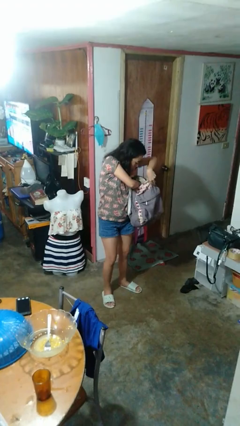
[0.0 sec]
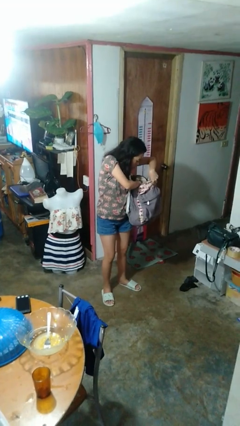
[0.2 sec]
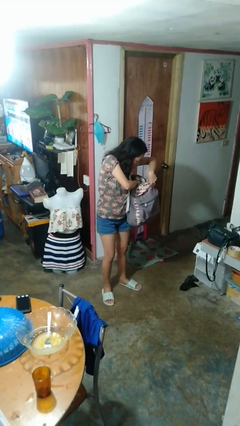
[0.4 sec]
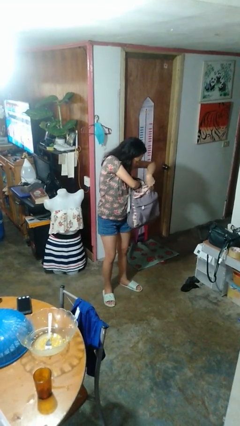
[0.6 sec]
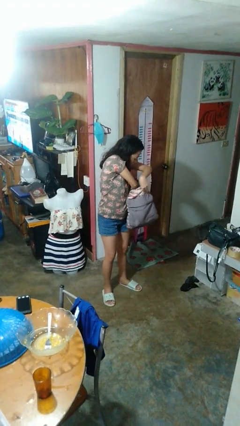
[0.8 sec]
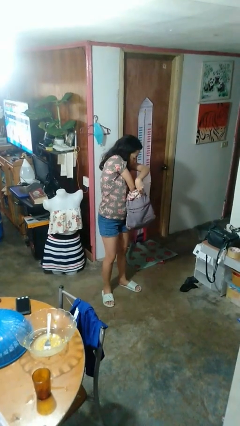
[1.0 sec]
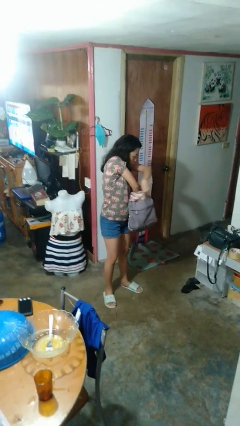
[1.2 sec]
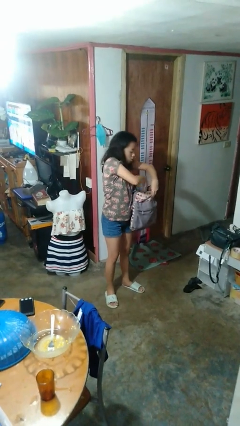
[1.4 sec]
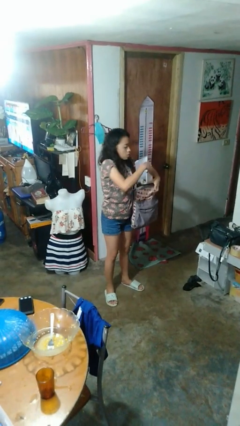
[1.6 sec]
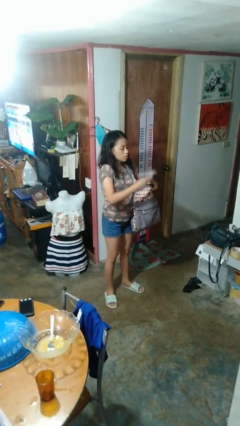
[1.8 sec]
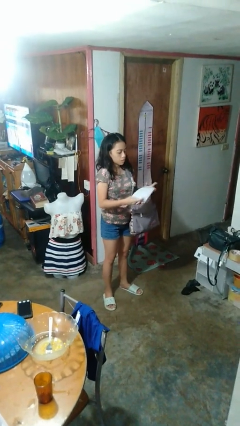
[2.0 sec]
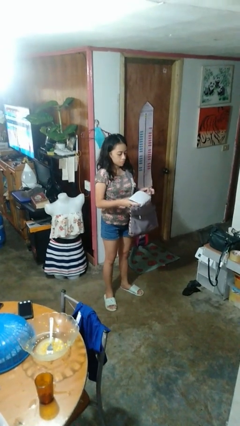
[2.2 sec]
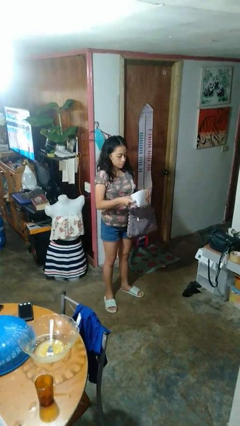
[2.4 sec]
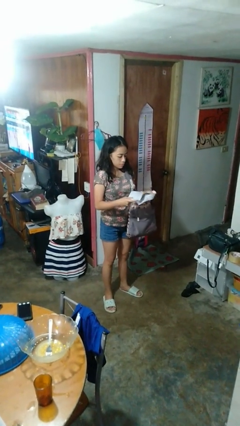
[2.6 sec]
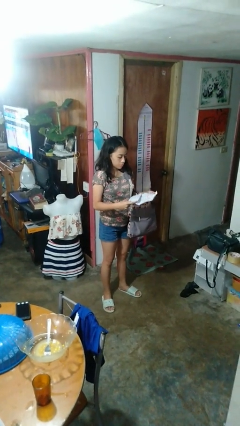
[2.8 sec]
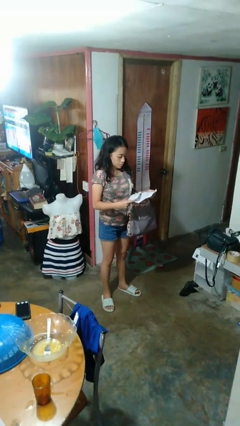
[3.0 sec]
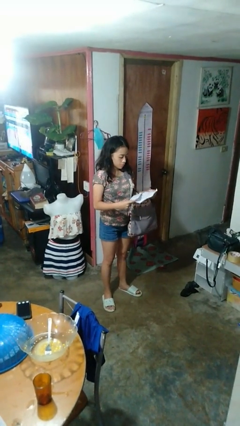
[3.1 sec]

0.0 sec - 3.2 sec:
person takes object from backpack

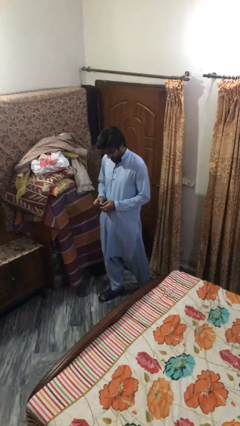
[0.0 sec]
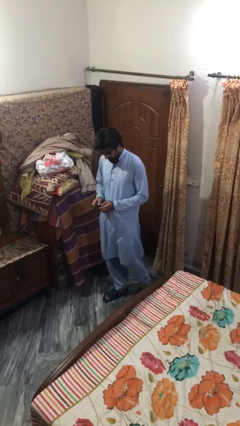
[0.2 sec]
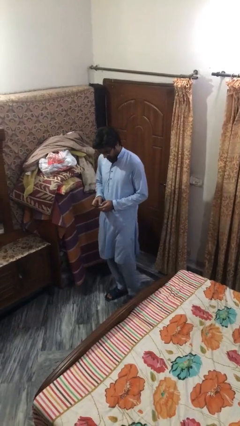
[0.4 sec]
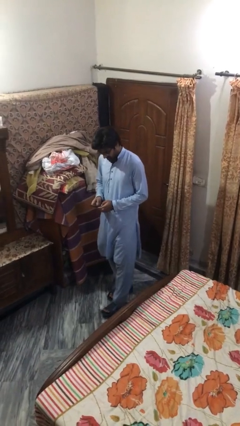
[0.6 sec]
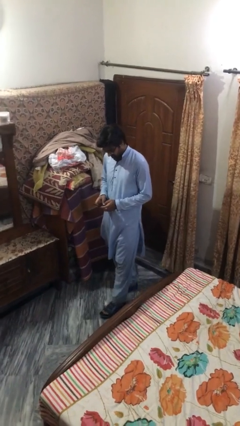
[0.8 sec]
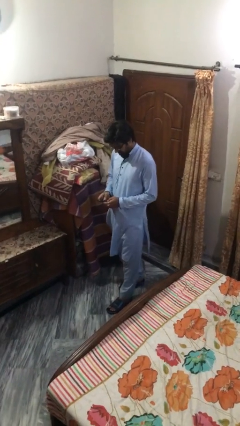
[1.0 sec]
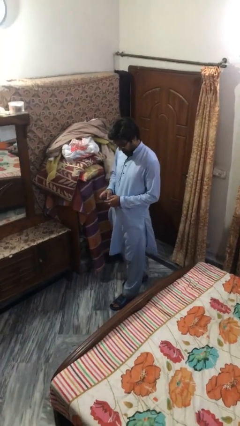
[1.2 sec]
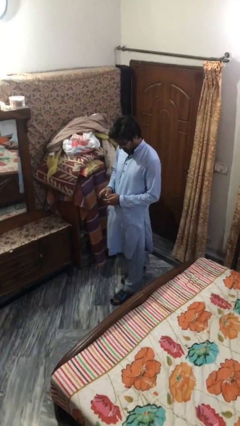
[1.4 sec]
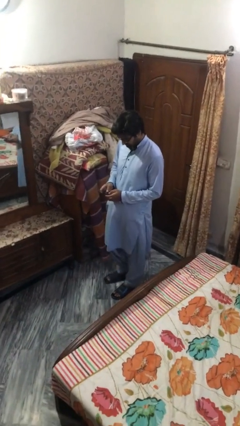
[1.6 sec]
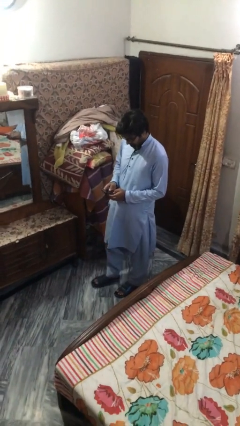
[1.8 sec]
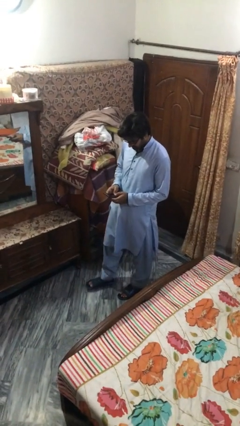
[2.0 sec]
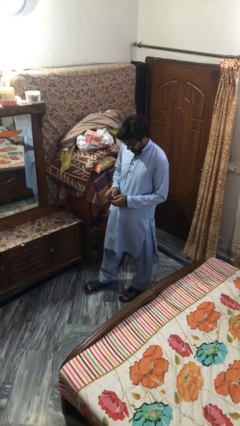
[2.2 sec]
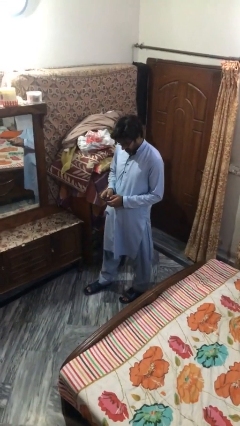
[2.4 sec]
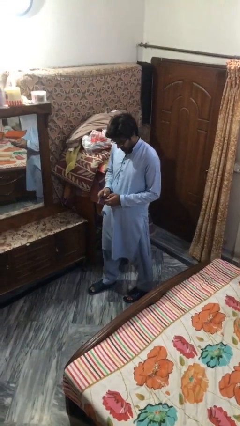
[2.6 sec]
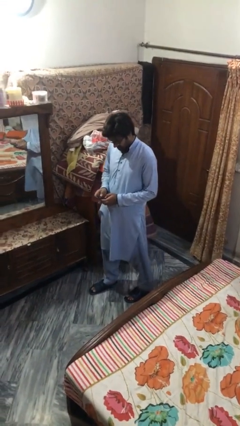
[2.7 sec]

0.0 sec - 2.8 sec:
person texts on phone

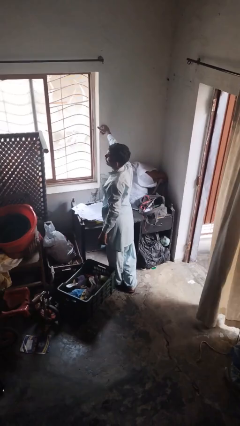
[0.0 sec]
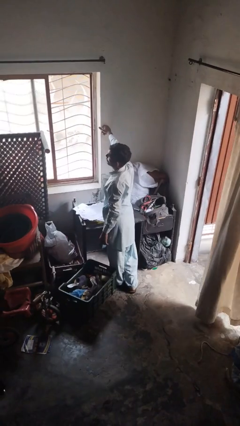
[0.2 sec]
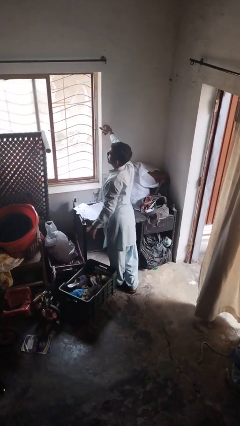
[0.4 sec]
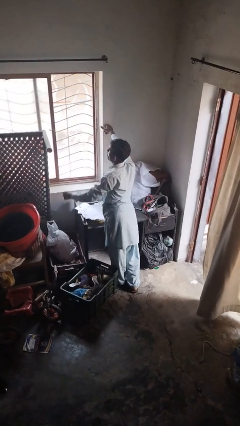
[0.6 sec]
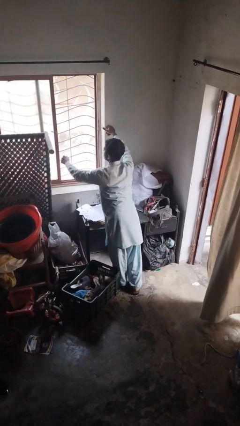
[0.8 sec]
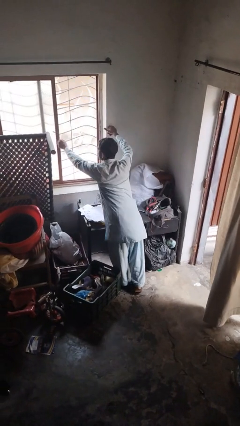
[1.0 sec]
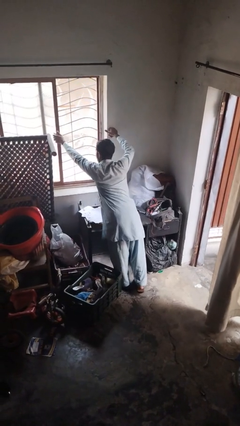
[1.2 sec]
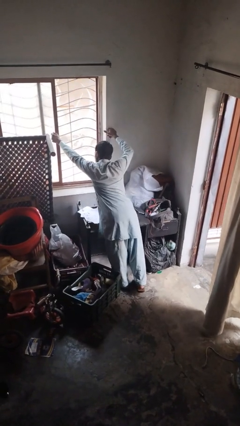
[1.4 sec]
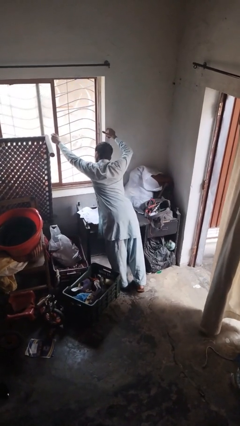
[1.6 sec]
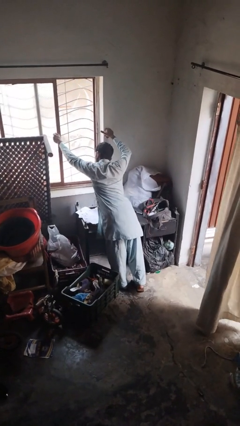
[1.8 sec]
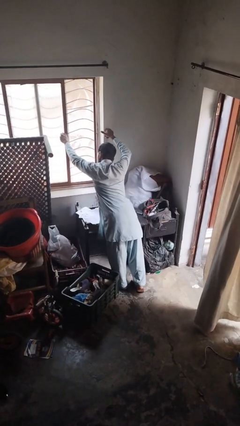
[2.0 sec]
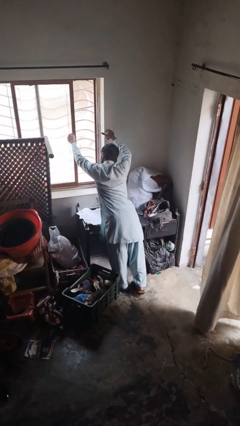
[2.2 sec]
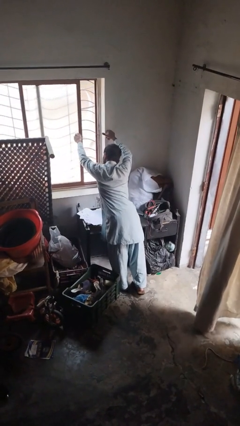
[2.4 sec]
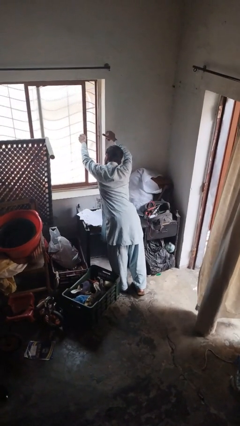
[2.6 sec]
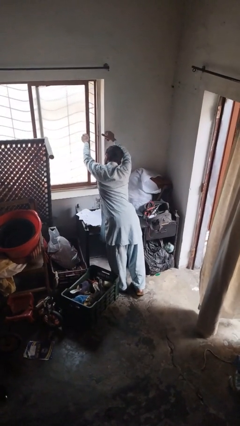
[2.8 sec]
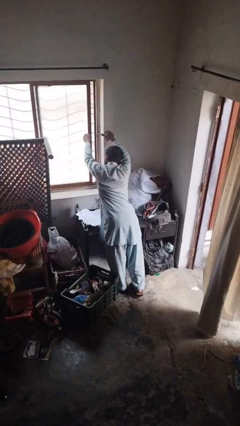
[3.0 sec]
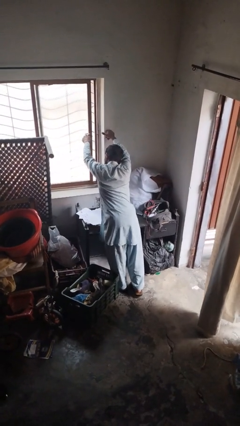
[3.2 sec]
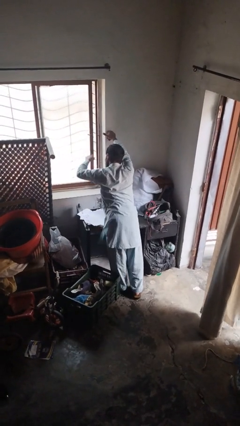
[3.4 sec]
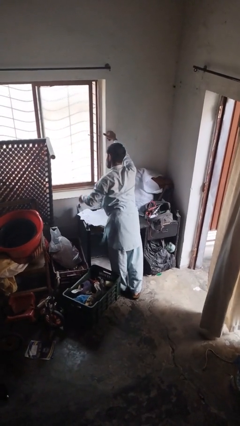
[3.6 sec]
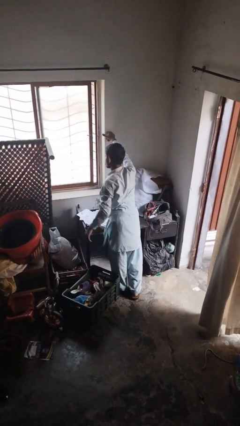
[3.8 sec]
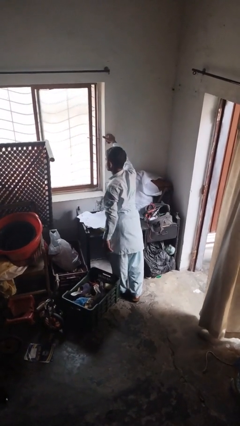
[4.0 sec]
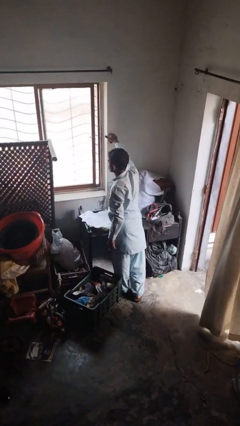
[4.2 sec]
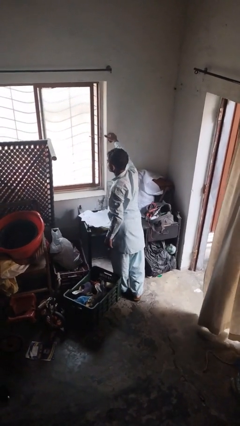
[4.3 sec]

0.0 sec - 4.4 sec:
person closes home window

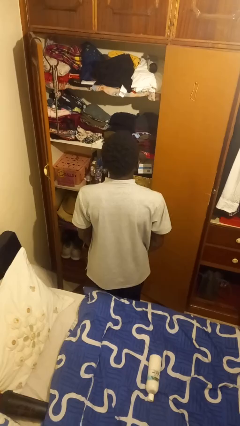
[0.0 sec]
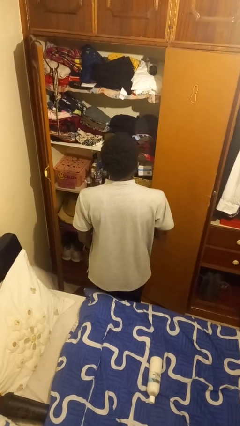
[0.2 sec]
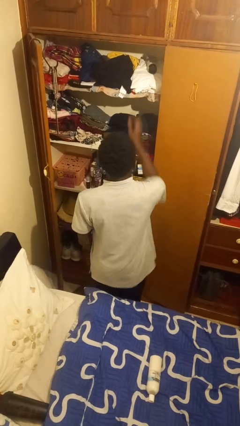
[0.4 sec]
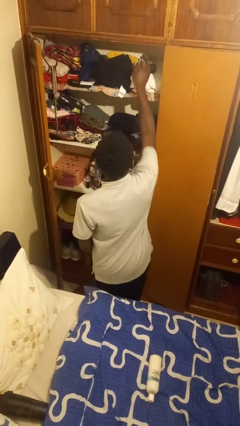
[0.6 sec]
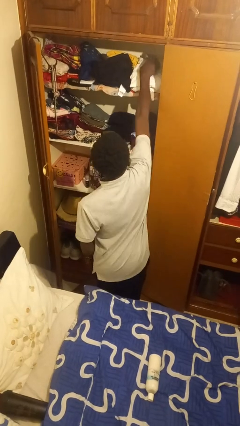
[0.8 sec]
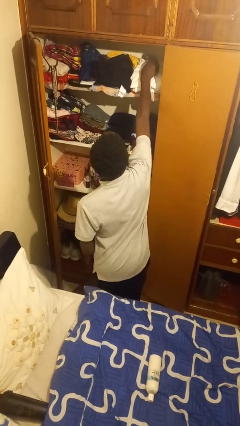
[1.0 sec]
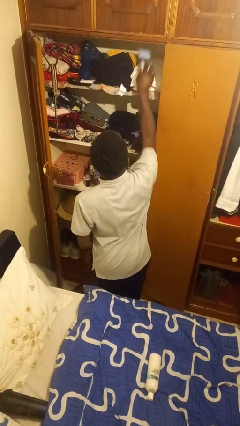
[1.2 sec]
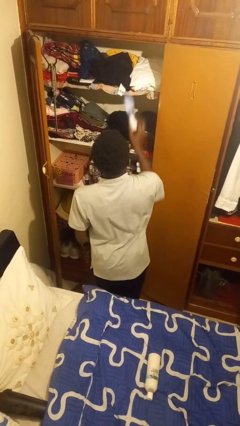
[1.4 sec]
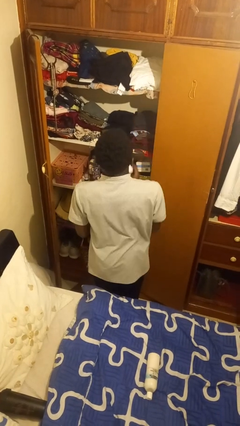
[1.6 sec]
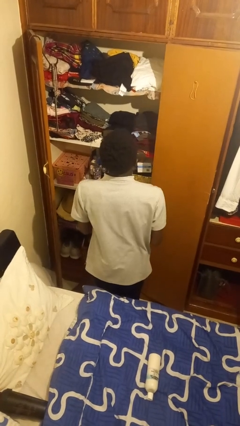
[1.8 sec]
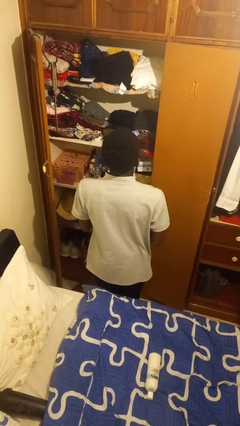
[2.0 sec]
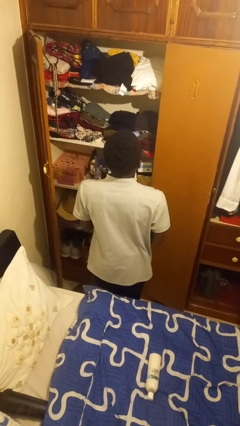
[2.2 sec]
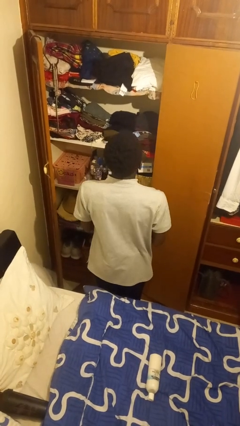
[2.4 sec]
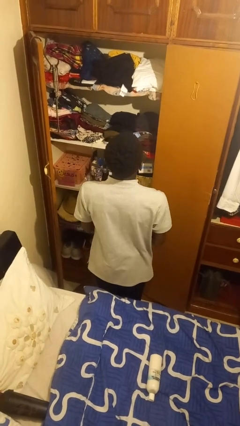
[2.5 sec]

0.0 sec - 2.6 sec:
person picks up object from shelf

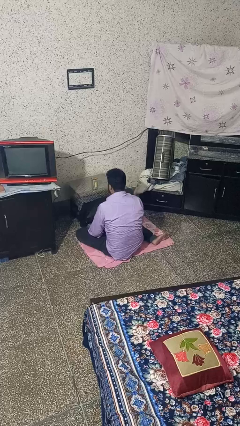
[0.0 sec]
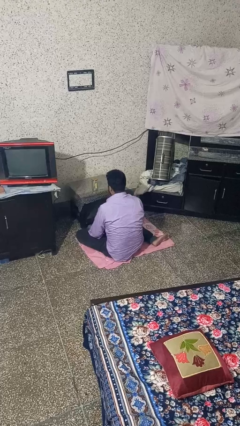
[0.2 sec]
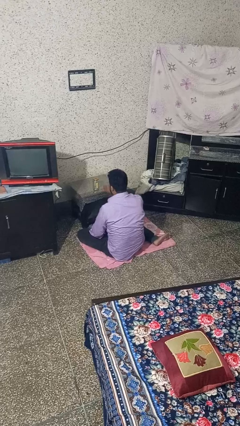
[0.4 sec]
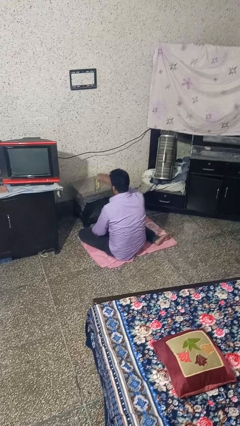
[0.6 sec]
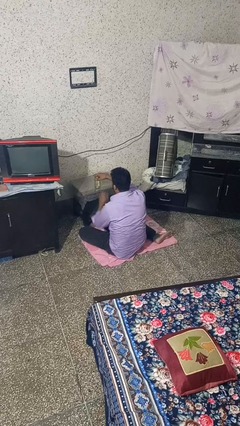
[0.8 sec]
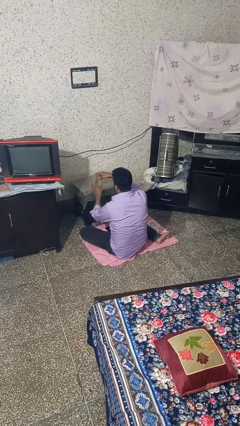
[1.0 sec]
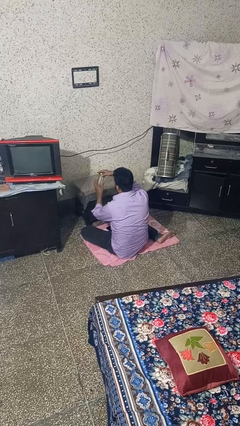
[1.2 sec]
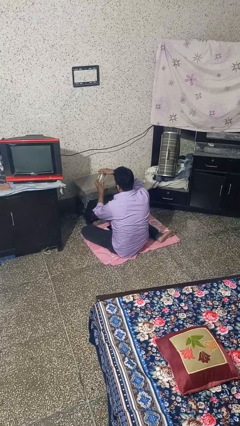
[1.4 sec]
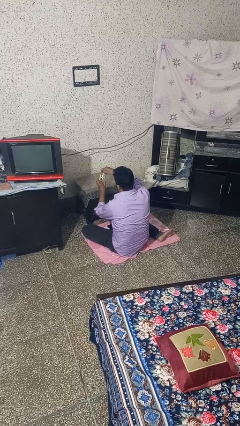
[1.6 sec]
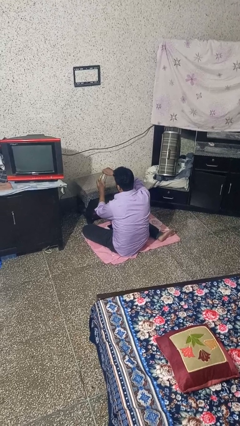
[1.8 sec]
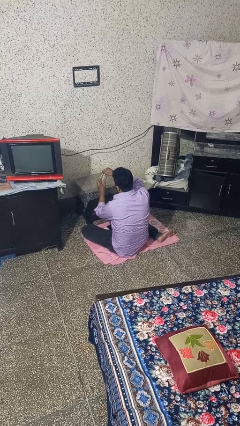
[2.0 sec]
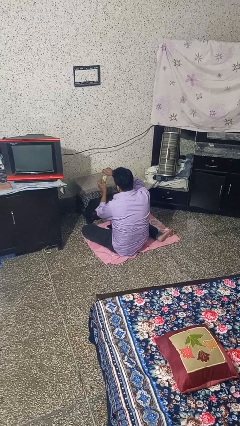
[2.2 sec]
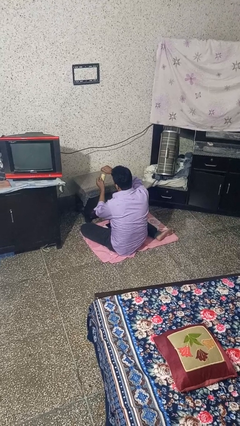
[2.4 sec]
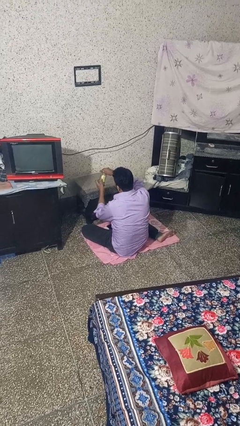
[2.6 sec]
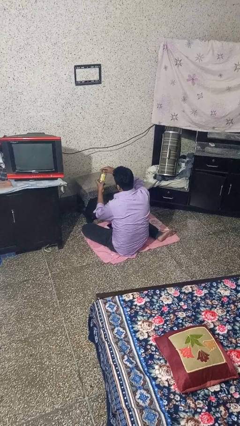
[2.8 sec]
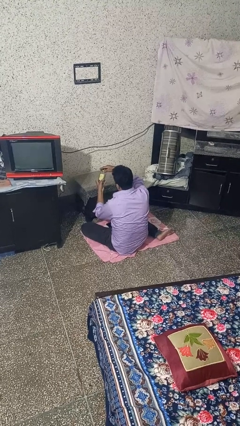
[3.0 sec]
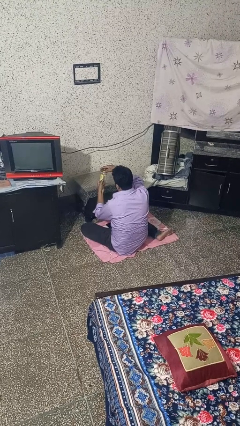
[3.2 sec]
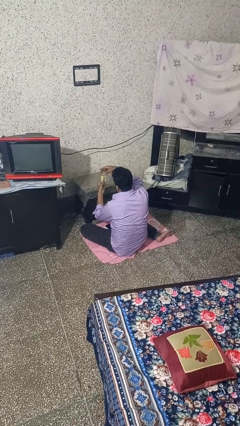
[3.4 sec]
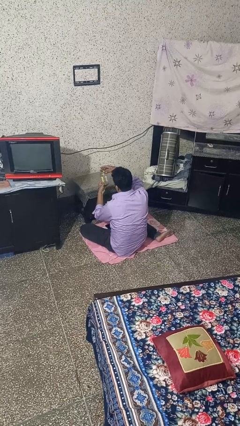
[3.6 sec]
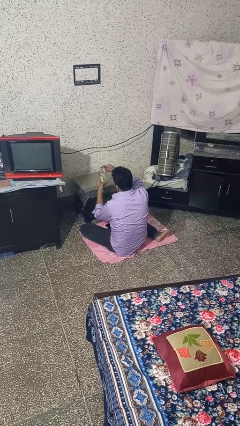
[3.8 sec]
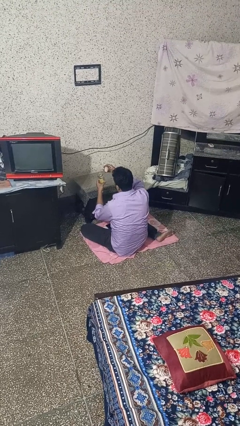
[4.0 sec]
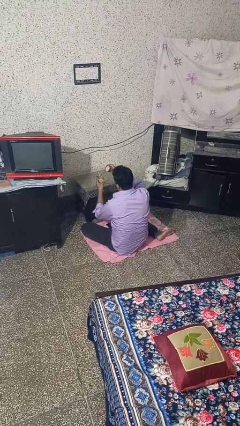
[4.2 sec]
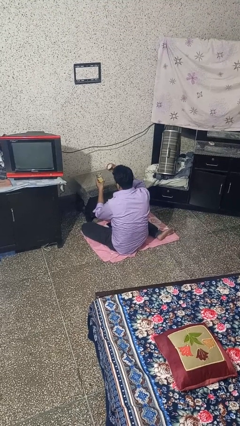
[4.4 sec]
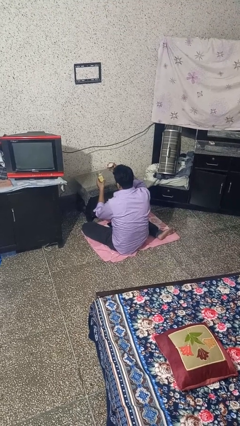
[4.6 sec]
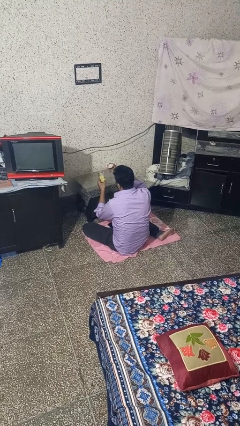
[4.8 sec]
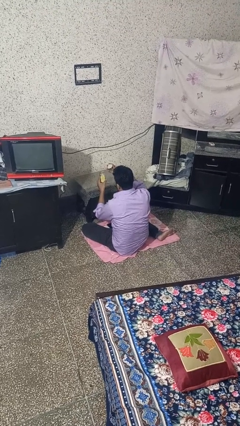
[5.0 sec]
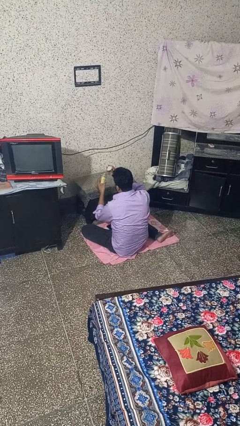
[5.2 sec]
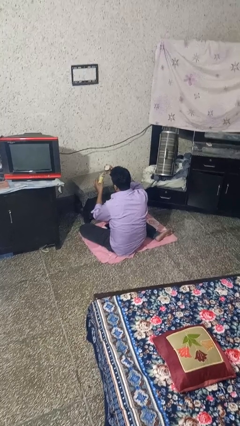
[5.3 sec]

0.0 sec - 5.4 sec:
person opens jar
